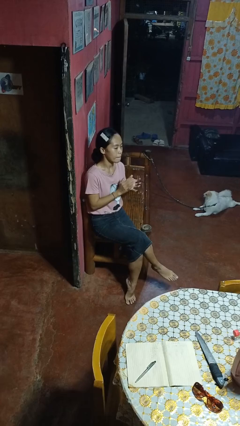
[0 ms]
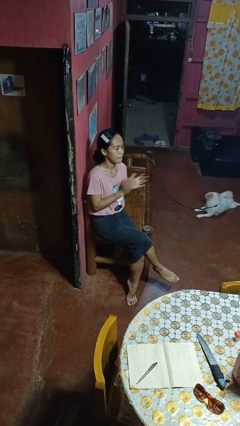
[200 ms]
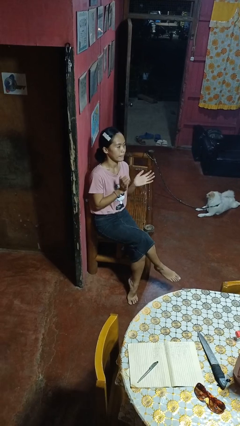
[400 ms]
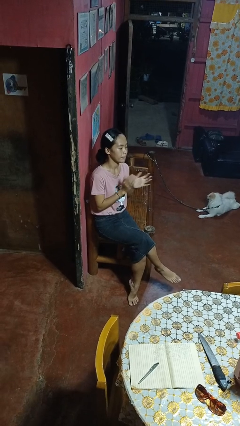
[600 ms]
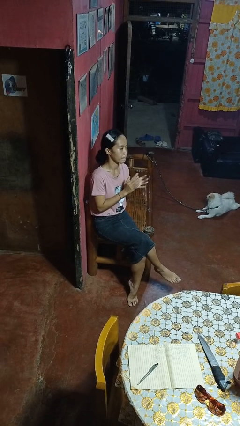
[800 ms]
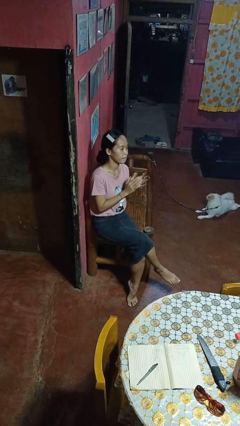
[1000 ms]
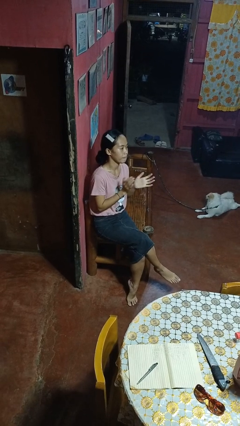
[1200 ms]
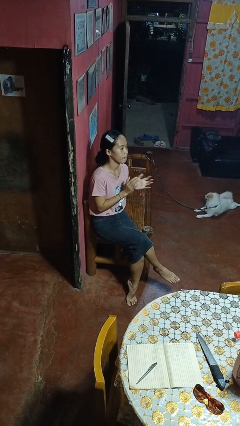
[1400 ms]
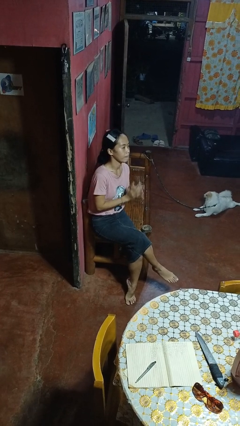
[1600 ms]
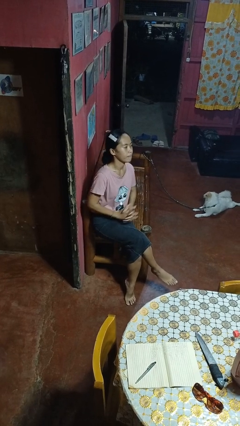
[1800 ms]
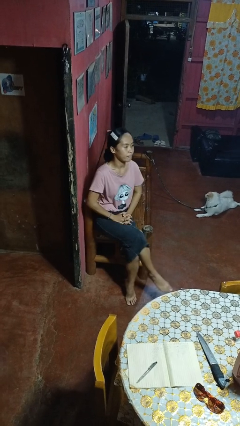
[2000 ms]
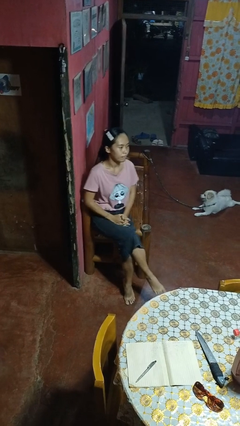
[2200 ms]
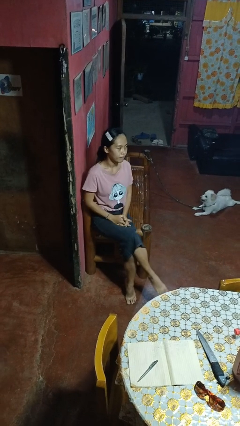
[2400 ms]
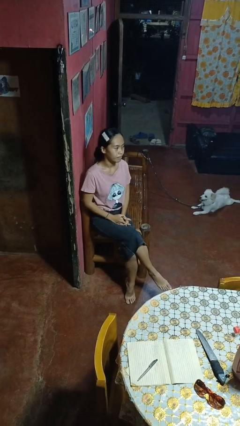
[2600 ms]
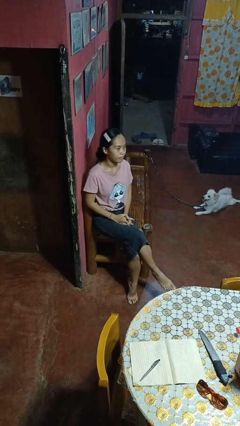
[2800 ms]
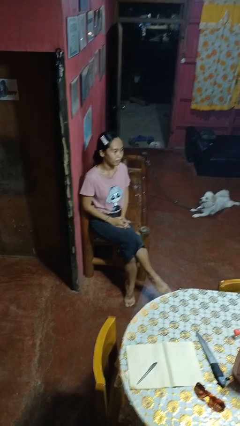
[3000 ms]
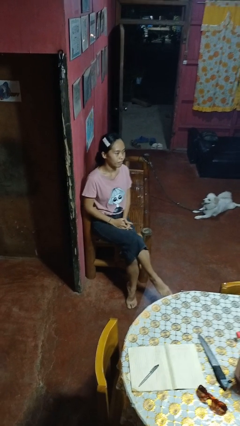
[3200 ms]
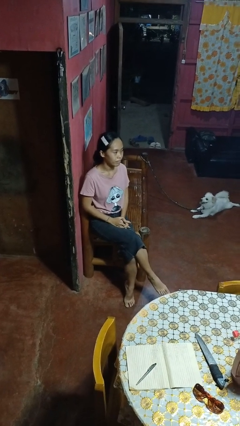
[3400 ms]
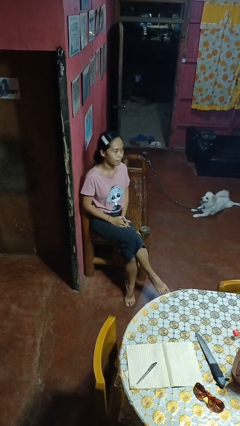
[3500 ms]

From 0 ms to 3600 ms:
person claps hands

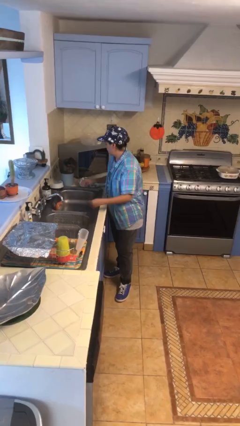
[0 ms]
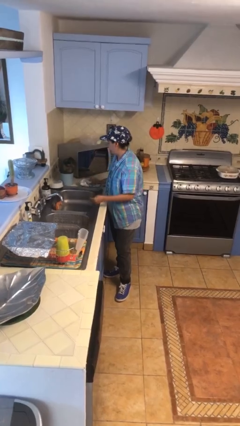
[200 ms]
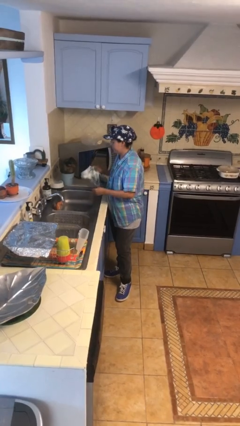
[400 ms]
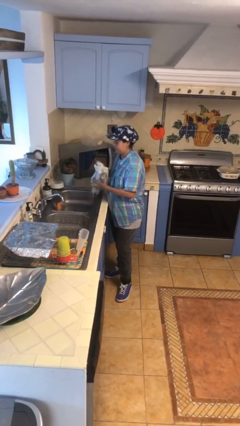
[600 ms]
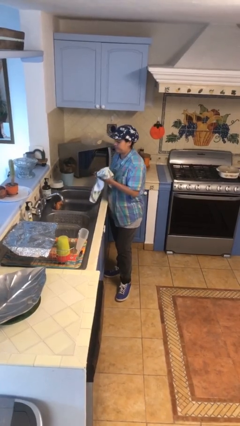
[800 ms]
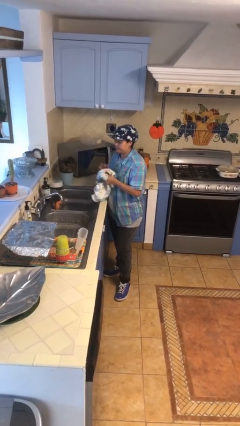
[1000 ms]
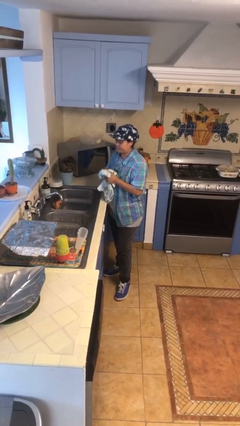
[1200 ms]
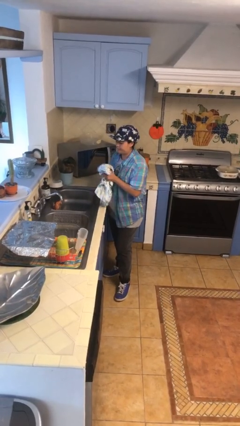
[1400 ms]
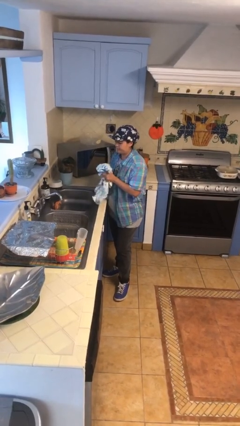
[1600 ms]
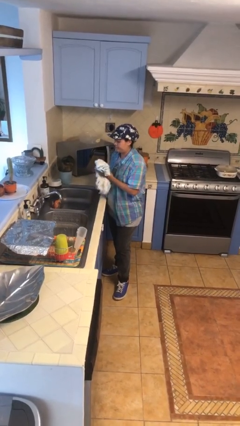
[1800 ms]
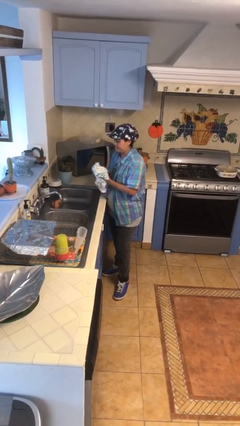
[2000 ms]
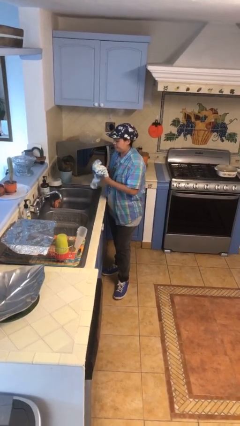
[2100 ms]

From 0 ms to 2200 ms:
person dries hands with towel

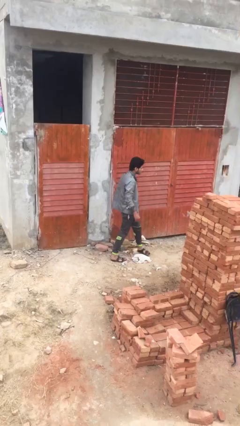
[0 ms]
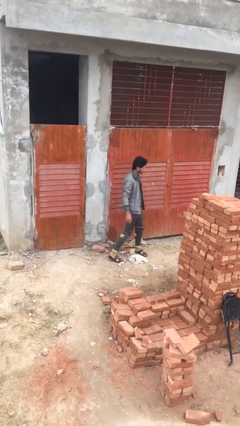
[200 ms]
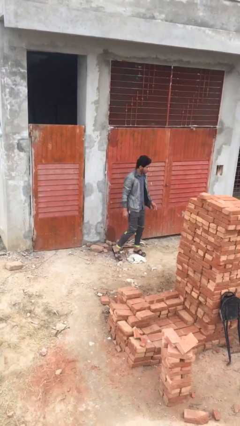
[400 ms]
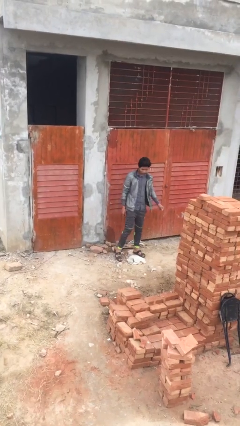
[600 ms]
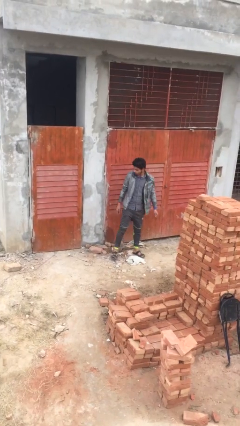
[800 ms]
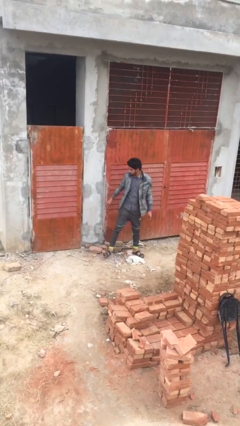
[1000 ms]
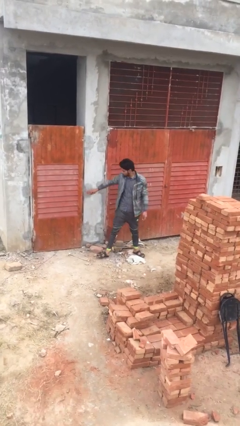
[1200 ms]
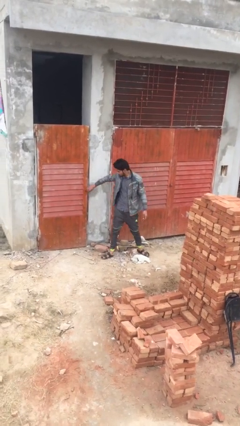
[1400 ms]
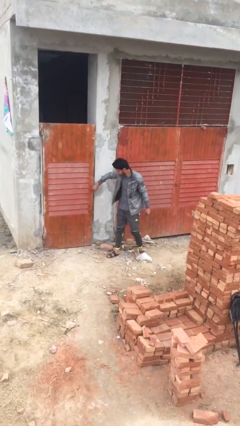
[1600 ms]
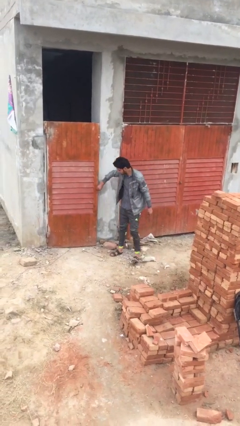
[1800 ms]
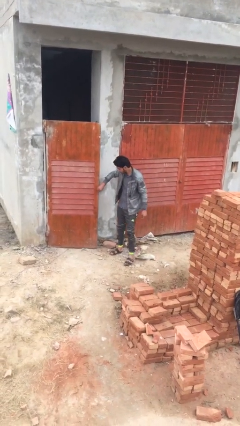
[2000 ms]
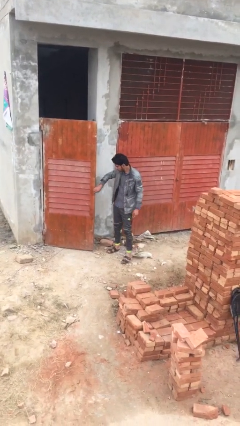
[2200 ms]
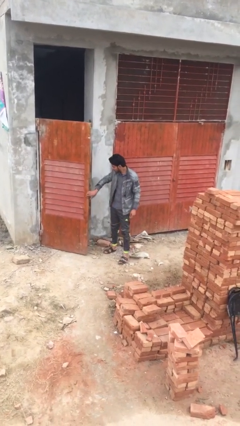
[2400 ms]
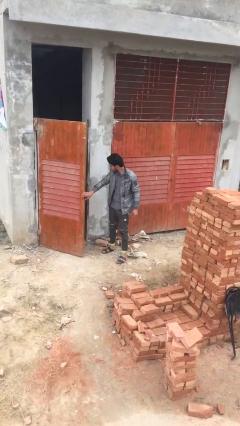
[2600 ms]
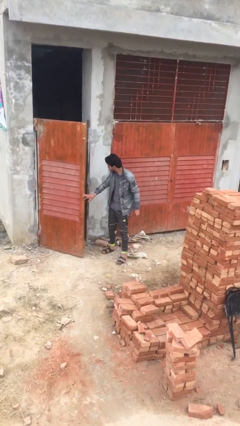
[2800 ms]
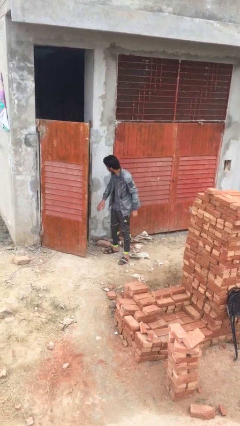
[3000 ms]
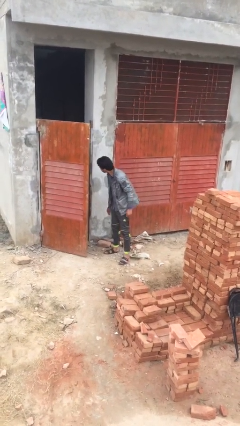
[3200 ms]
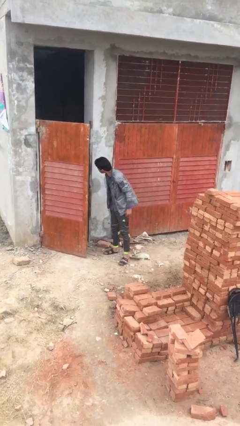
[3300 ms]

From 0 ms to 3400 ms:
person opens facility door

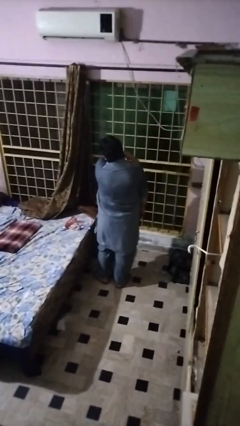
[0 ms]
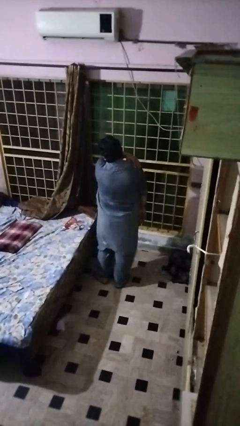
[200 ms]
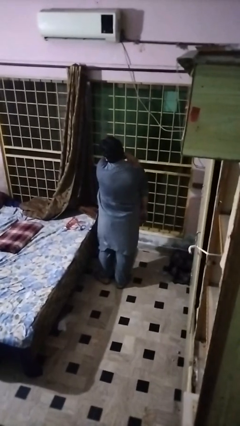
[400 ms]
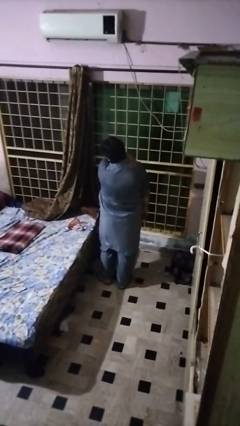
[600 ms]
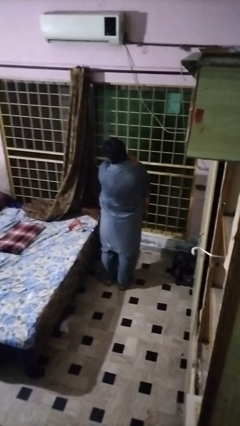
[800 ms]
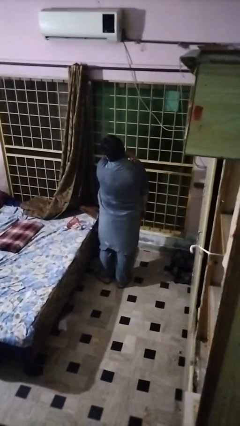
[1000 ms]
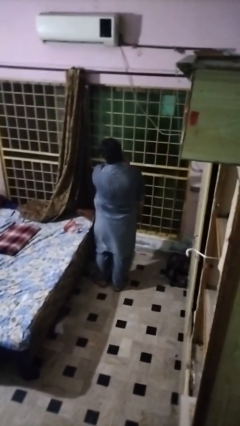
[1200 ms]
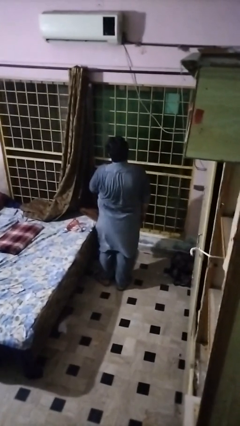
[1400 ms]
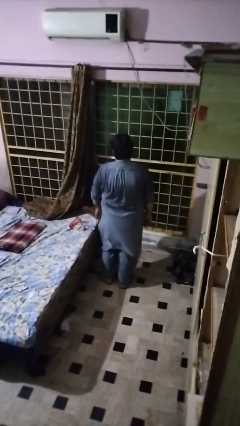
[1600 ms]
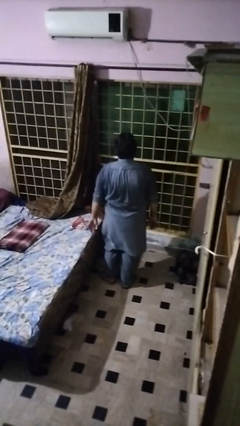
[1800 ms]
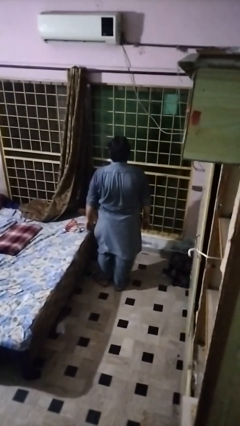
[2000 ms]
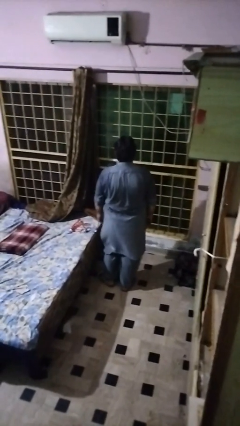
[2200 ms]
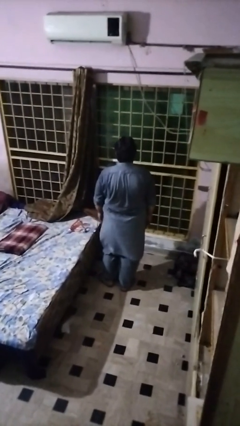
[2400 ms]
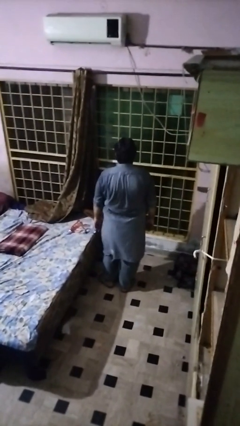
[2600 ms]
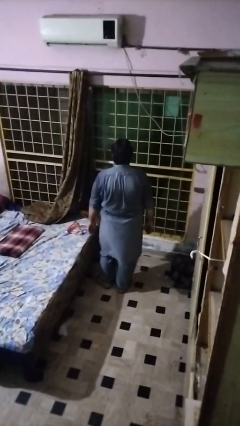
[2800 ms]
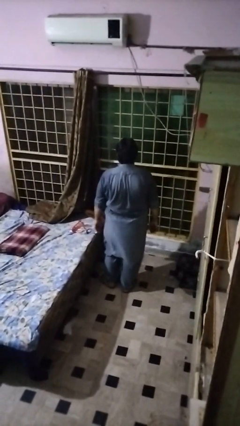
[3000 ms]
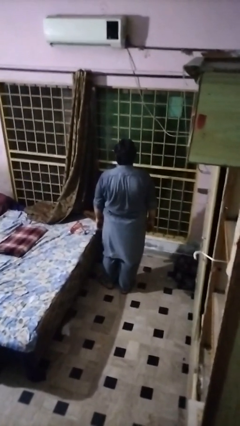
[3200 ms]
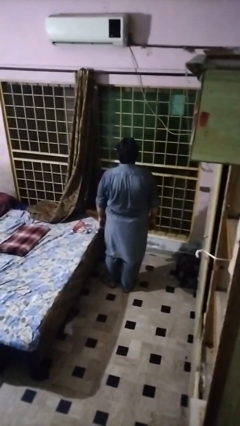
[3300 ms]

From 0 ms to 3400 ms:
person swats bug

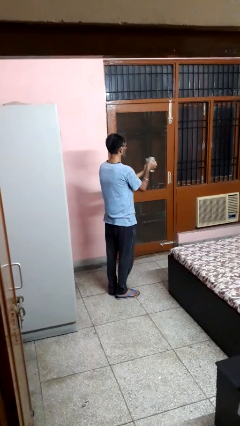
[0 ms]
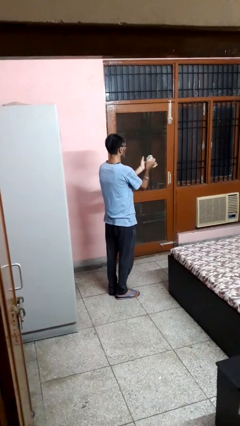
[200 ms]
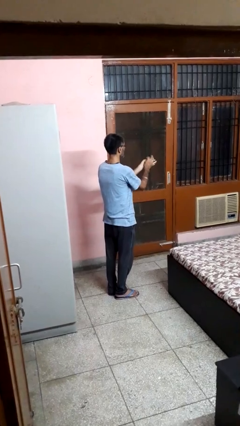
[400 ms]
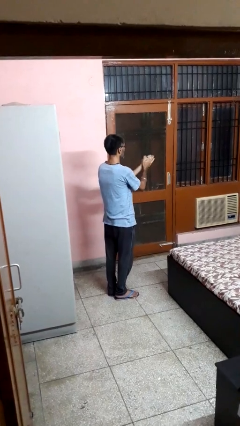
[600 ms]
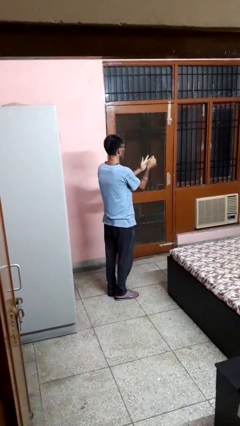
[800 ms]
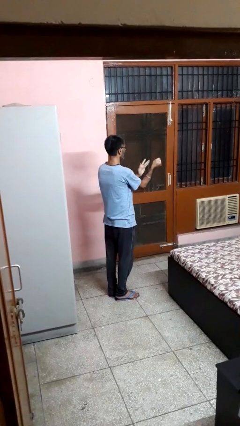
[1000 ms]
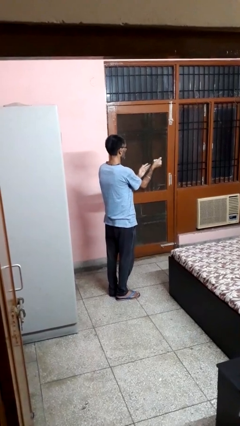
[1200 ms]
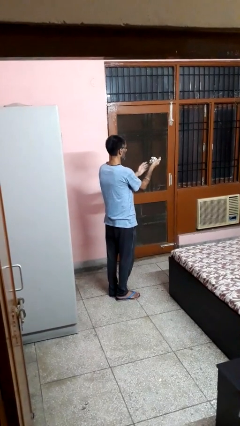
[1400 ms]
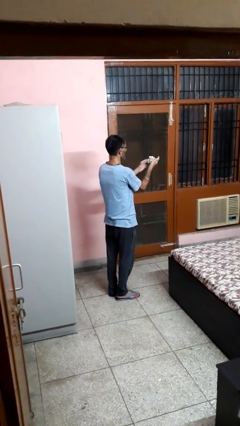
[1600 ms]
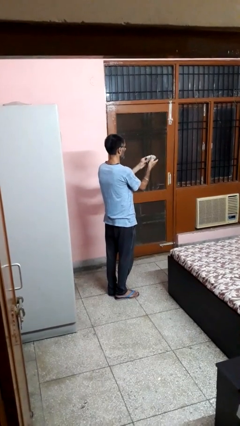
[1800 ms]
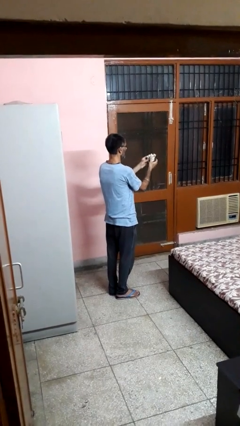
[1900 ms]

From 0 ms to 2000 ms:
person crumples paper

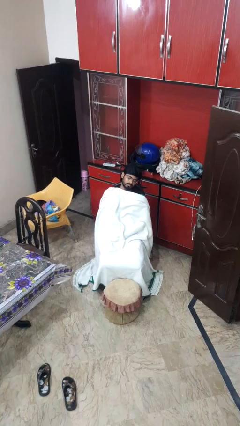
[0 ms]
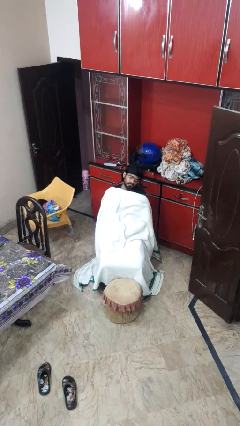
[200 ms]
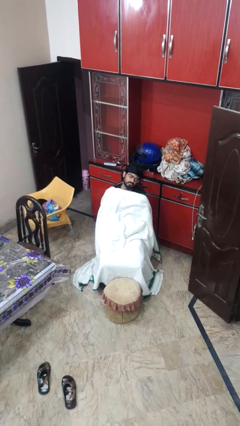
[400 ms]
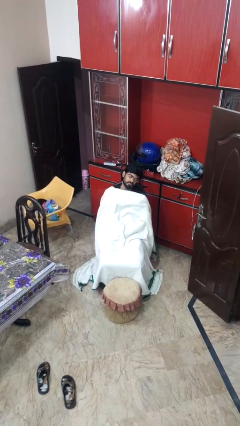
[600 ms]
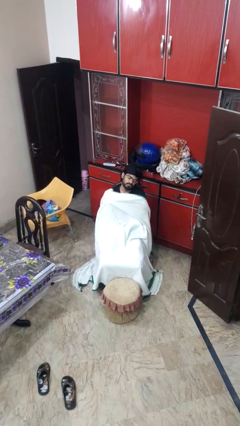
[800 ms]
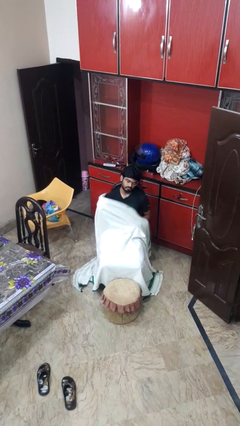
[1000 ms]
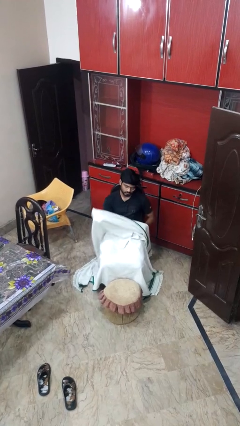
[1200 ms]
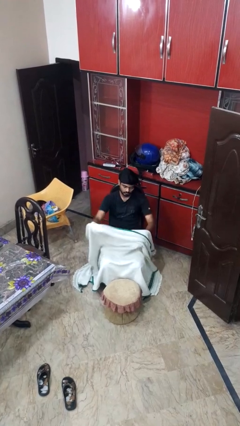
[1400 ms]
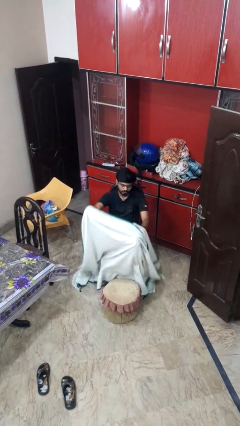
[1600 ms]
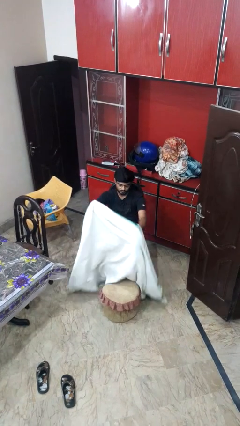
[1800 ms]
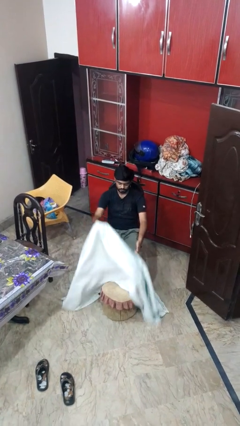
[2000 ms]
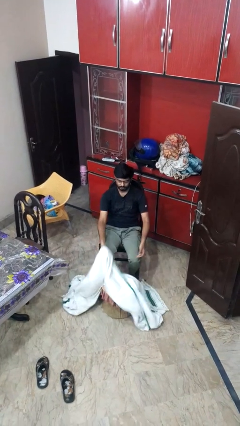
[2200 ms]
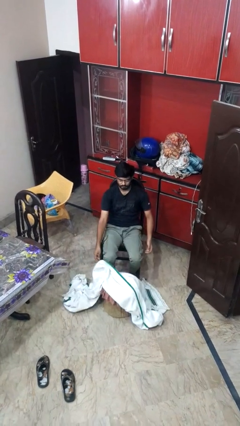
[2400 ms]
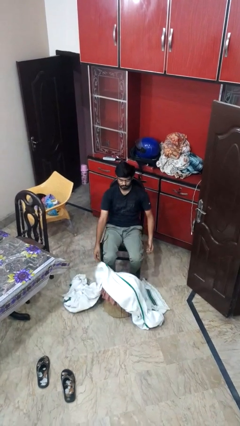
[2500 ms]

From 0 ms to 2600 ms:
person uncovers with blanket
